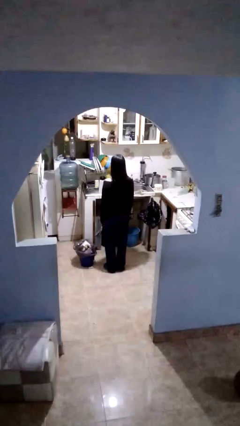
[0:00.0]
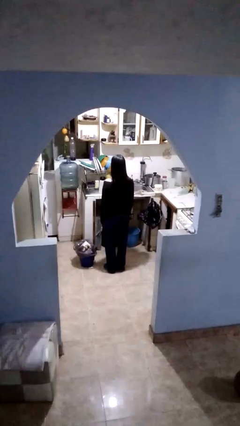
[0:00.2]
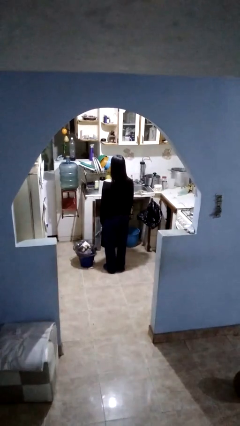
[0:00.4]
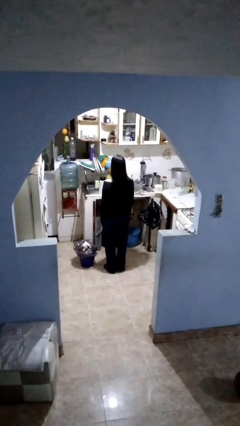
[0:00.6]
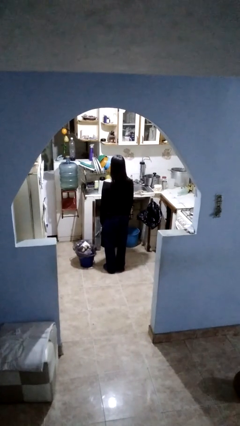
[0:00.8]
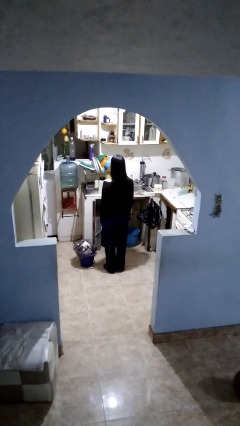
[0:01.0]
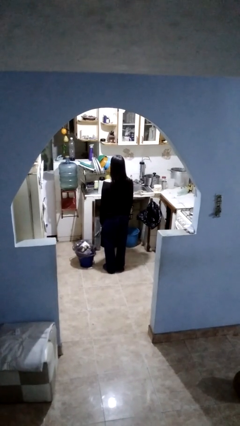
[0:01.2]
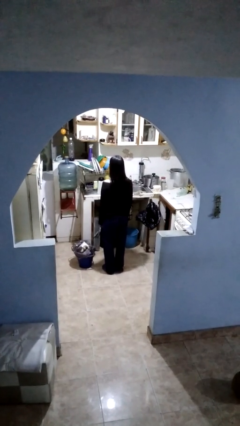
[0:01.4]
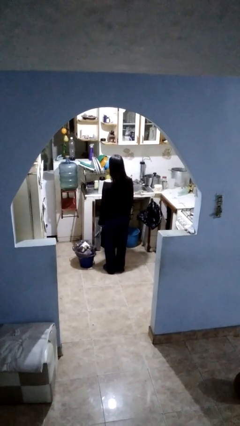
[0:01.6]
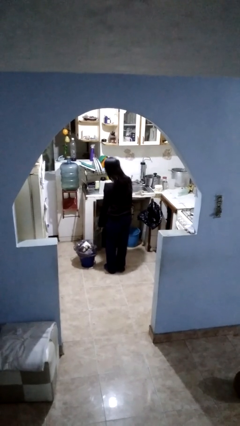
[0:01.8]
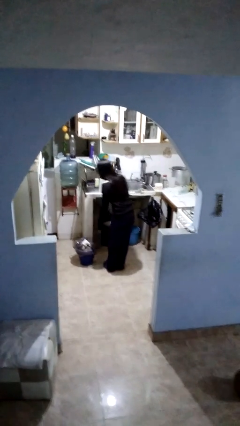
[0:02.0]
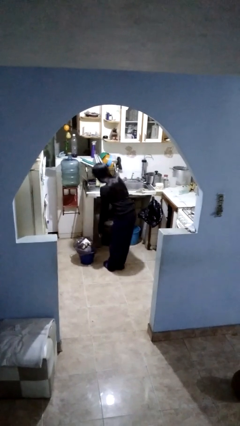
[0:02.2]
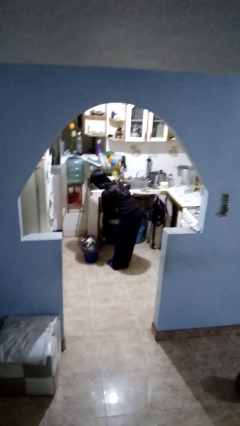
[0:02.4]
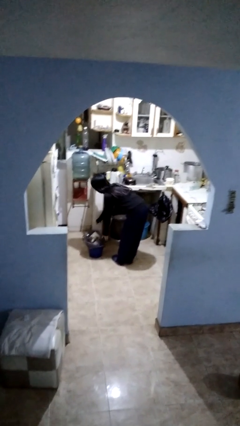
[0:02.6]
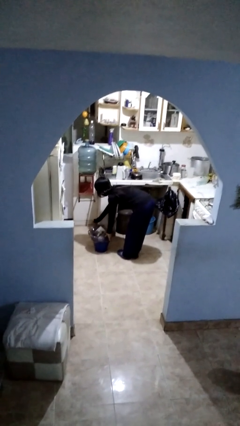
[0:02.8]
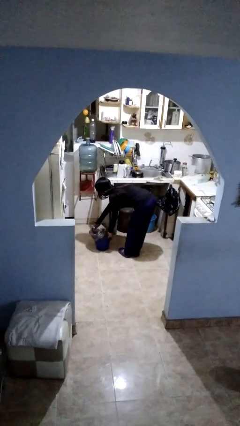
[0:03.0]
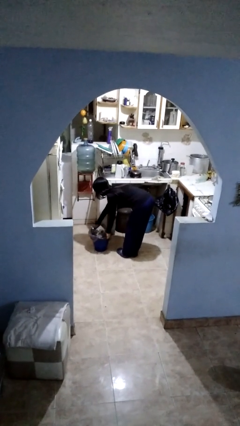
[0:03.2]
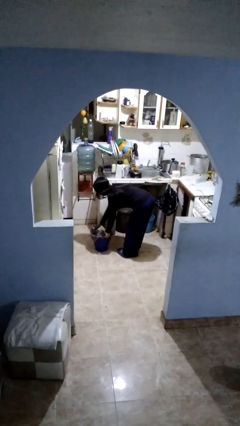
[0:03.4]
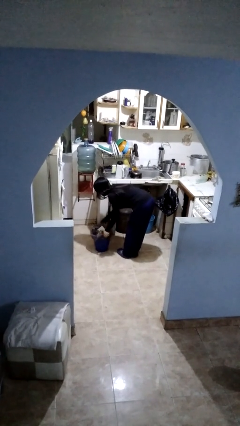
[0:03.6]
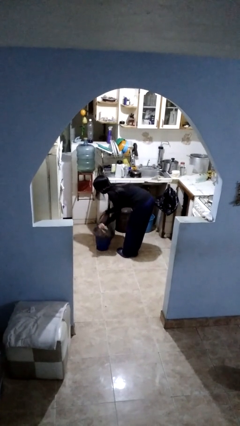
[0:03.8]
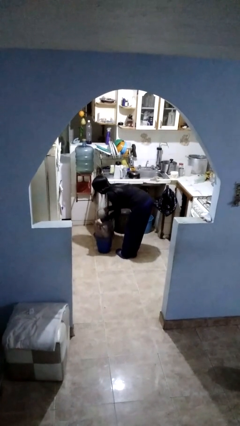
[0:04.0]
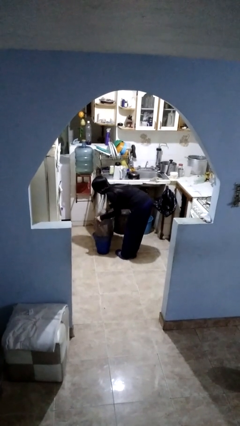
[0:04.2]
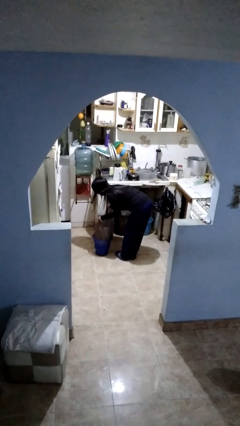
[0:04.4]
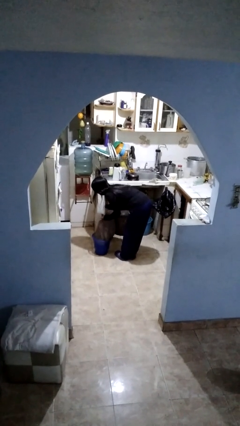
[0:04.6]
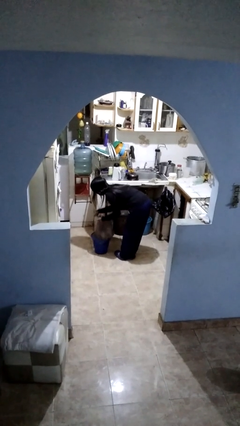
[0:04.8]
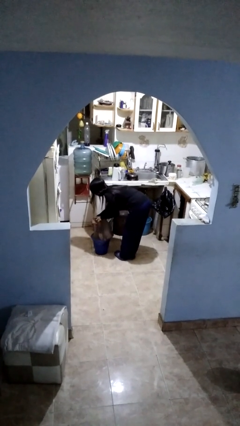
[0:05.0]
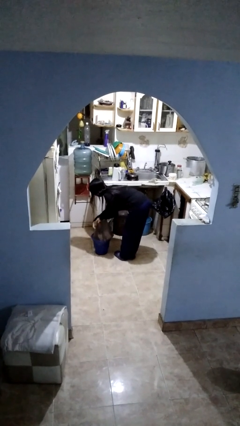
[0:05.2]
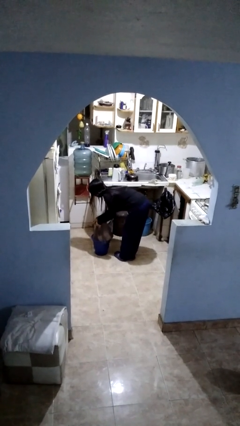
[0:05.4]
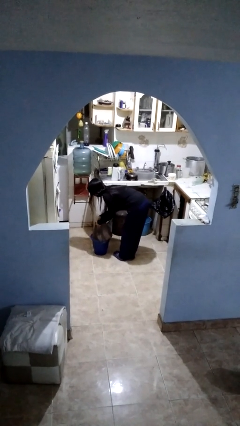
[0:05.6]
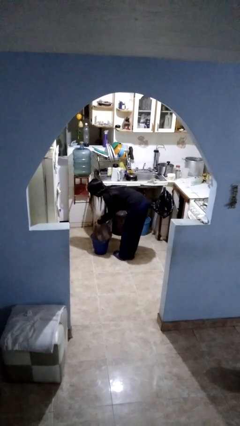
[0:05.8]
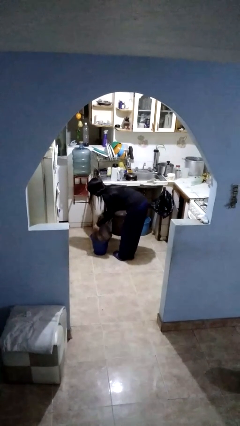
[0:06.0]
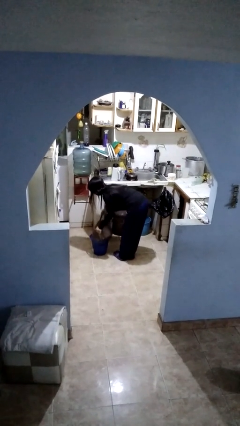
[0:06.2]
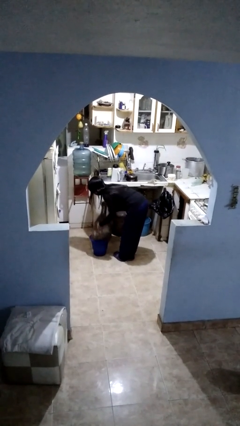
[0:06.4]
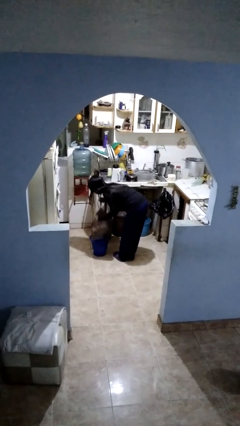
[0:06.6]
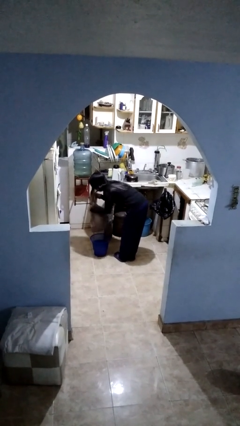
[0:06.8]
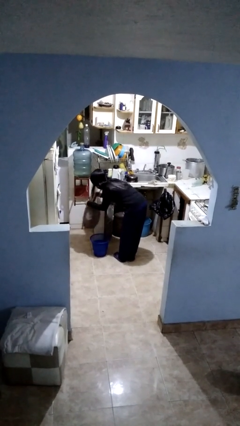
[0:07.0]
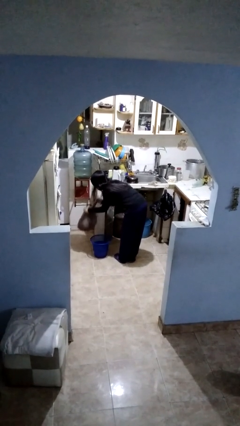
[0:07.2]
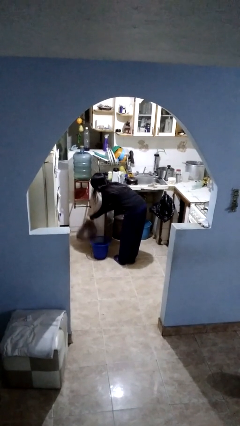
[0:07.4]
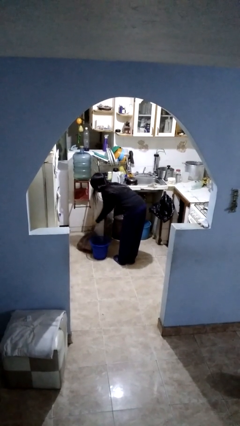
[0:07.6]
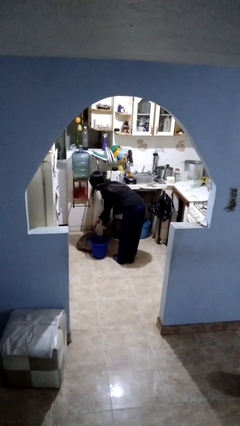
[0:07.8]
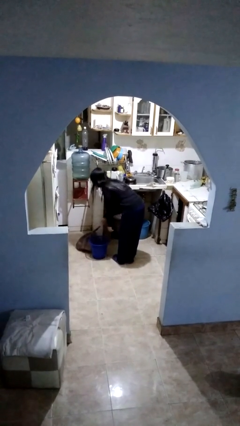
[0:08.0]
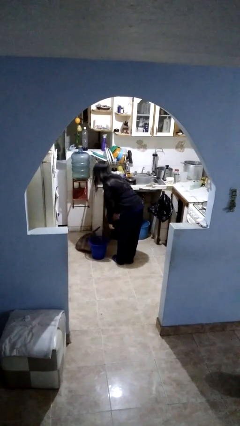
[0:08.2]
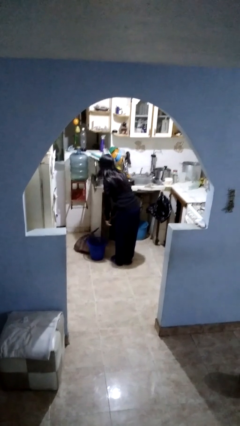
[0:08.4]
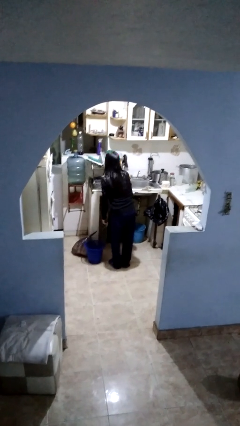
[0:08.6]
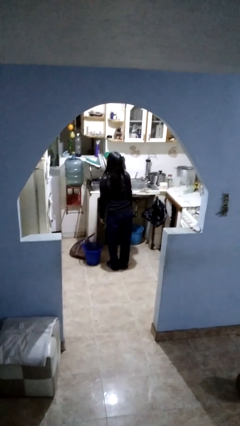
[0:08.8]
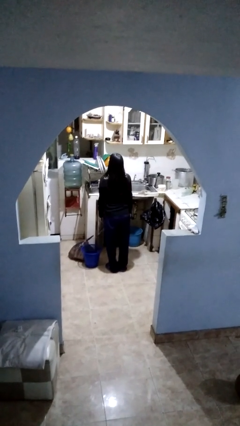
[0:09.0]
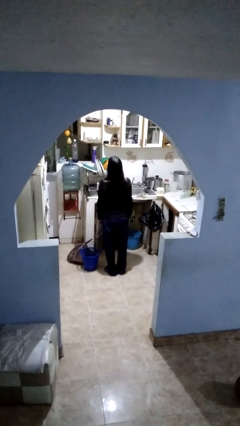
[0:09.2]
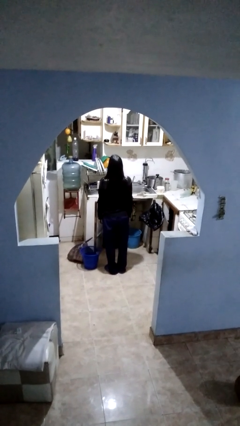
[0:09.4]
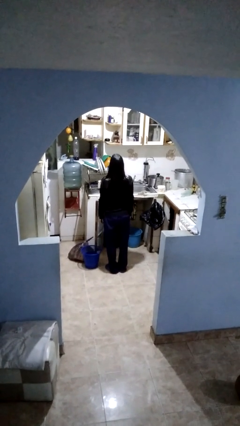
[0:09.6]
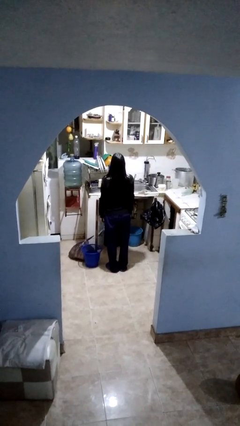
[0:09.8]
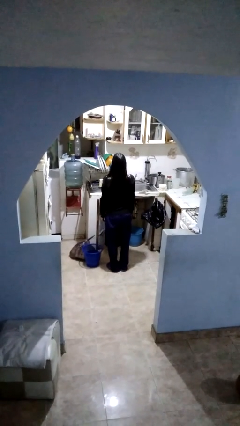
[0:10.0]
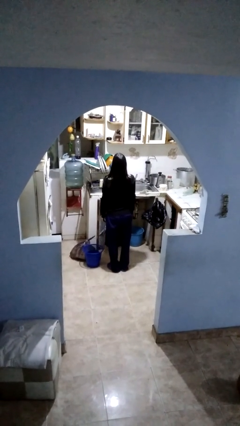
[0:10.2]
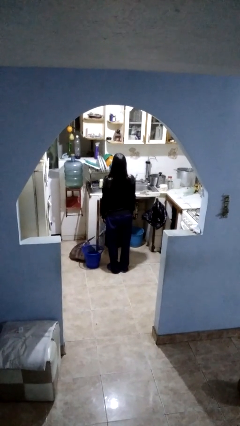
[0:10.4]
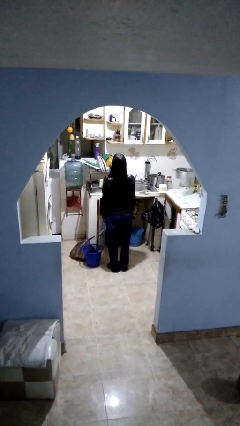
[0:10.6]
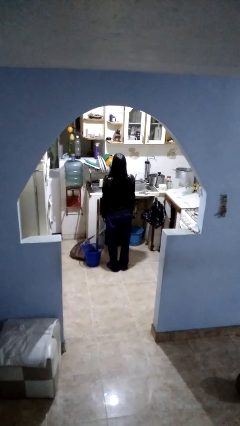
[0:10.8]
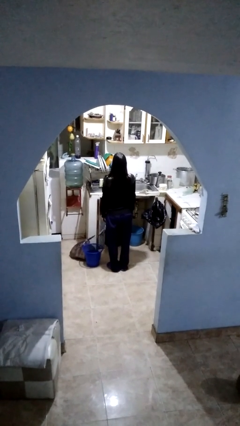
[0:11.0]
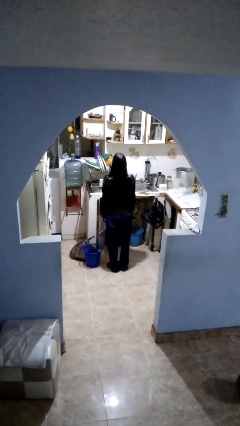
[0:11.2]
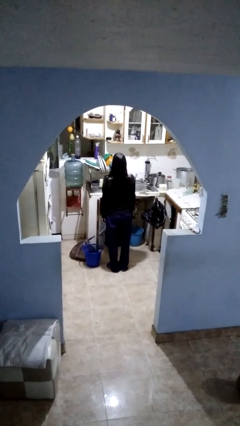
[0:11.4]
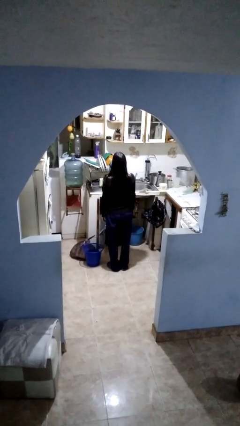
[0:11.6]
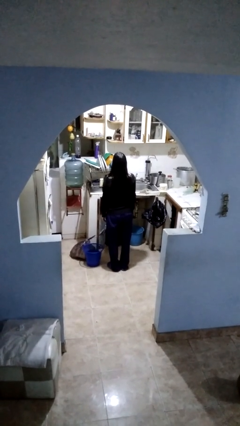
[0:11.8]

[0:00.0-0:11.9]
person removes trashbag from trashcan

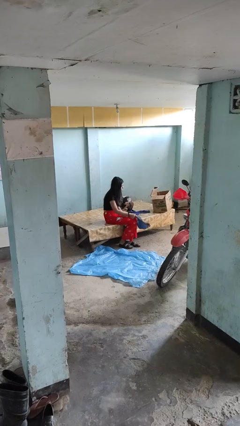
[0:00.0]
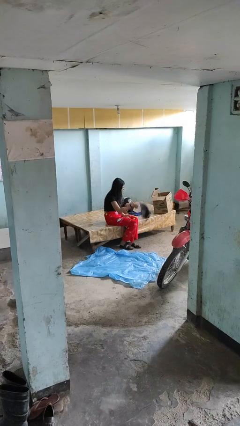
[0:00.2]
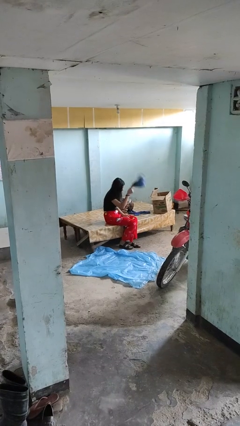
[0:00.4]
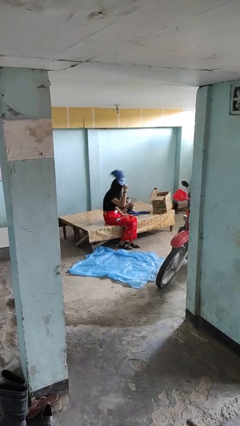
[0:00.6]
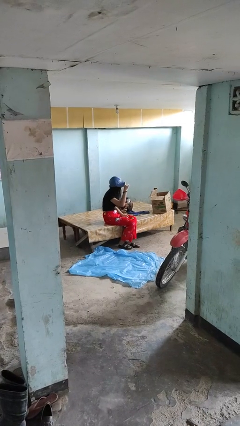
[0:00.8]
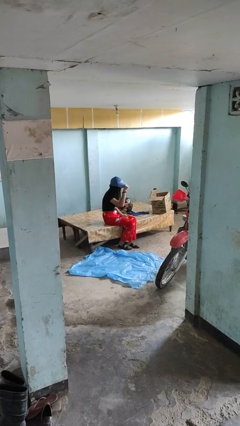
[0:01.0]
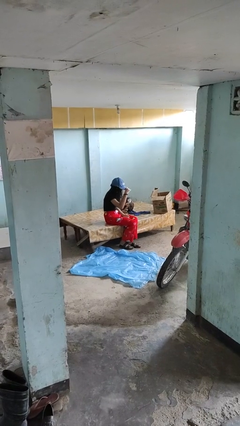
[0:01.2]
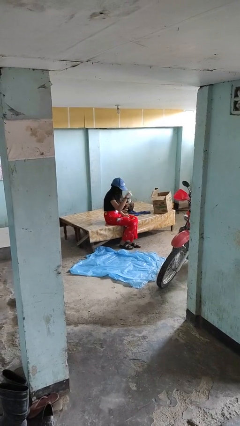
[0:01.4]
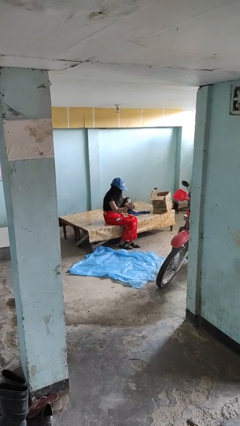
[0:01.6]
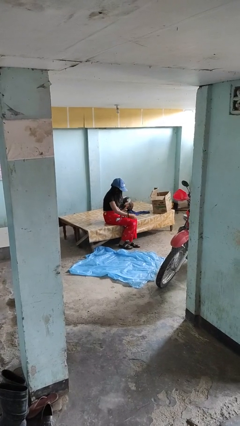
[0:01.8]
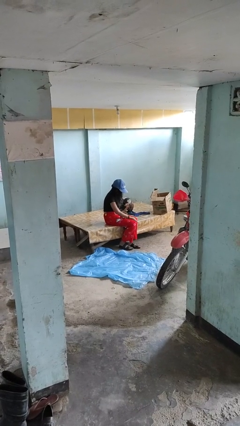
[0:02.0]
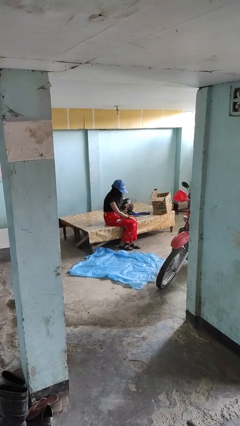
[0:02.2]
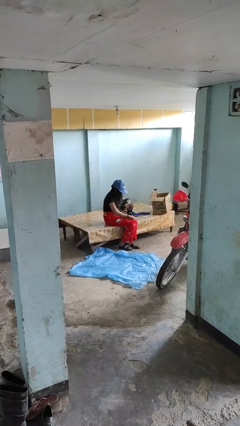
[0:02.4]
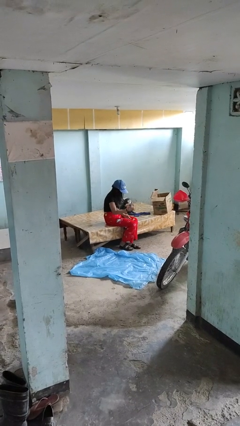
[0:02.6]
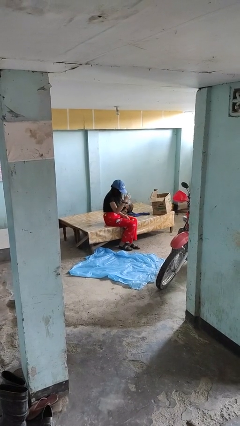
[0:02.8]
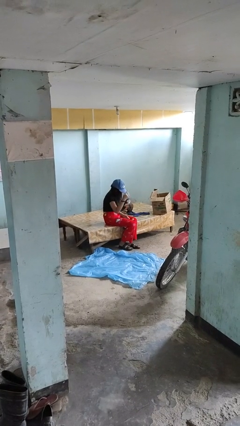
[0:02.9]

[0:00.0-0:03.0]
person puts on hat

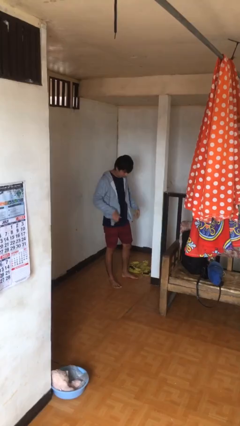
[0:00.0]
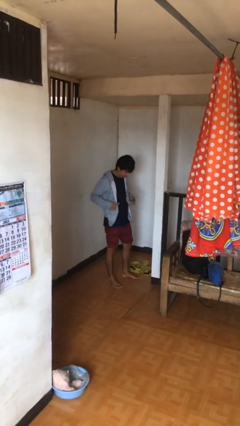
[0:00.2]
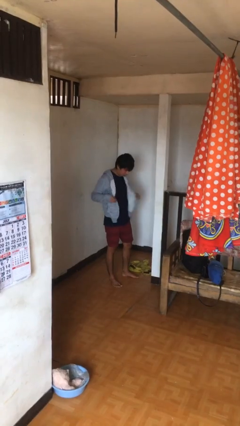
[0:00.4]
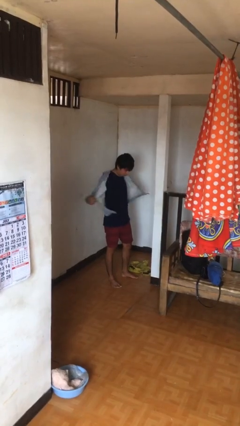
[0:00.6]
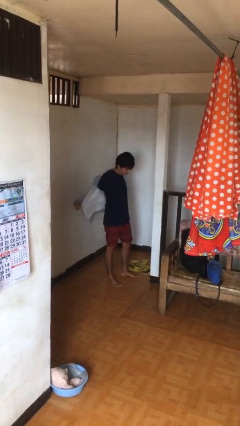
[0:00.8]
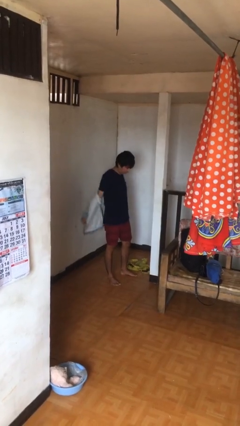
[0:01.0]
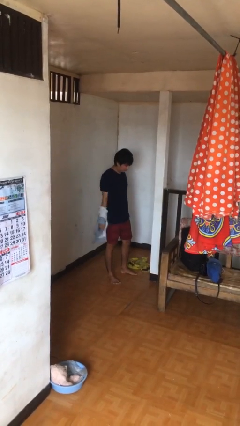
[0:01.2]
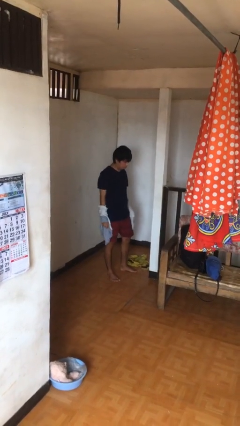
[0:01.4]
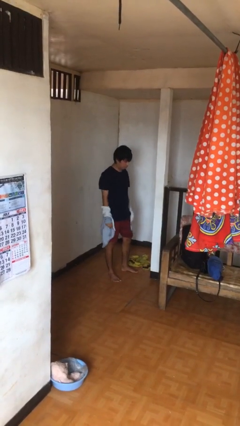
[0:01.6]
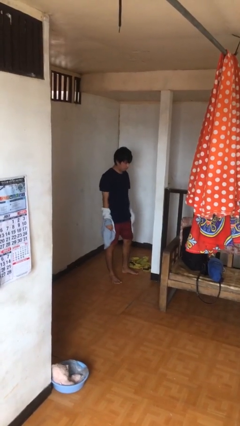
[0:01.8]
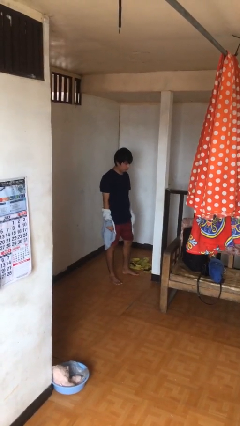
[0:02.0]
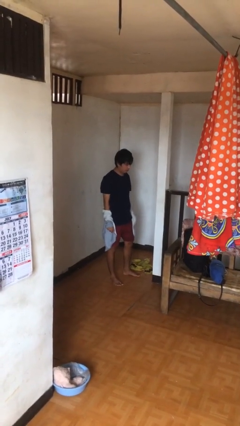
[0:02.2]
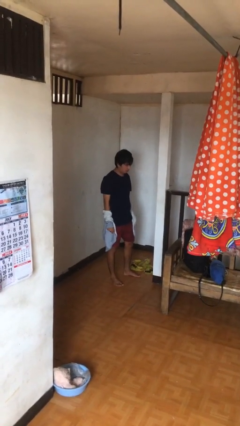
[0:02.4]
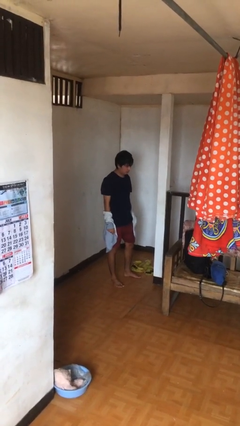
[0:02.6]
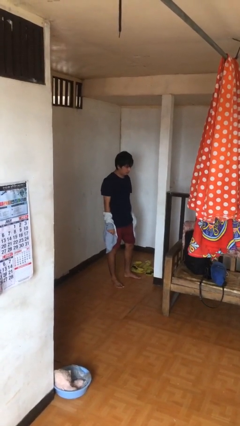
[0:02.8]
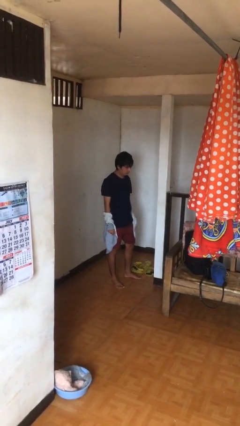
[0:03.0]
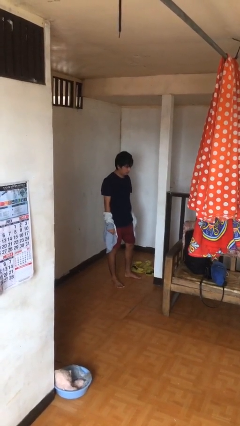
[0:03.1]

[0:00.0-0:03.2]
person takes off jacket
